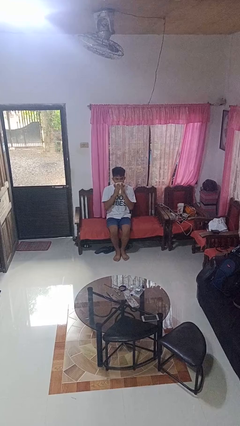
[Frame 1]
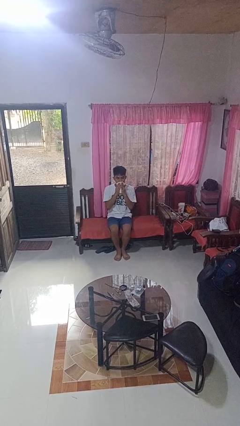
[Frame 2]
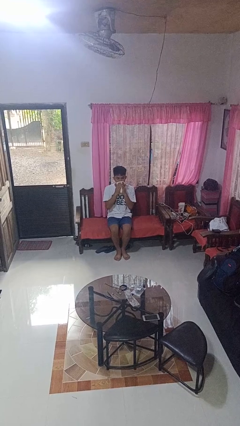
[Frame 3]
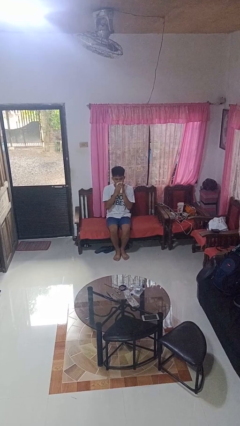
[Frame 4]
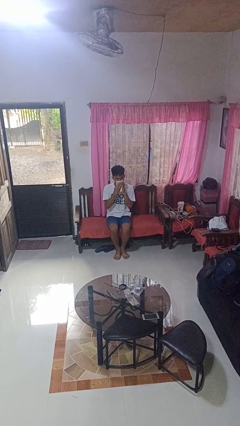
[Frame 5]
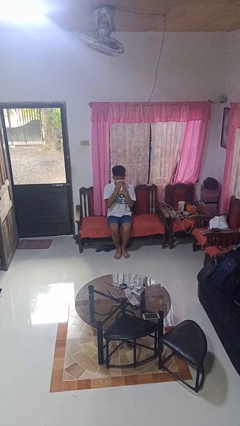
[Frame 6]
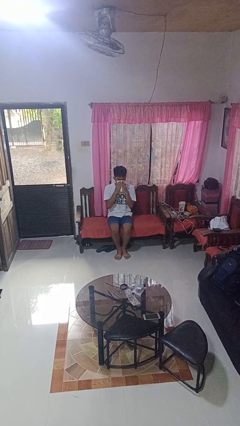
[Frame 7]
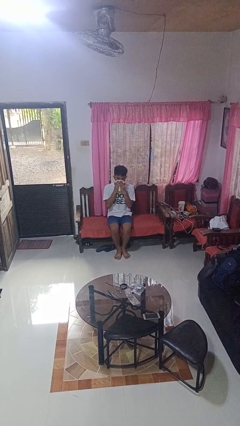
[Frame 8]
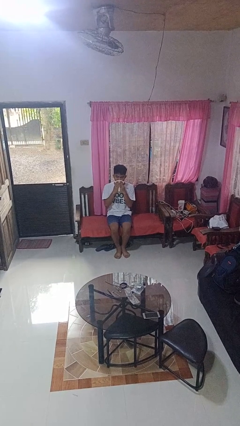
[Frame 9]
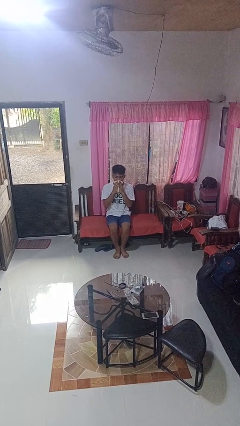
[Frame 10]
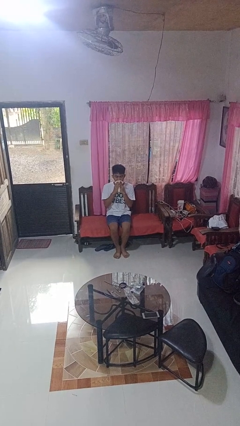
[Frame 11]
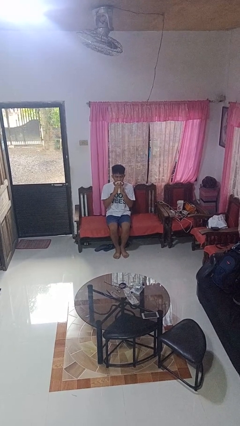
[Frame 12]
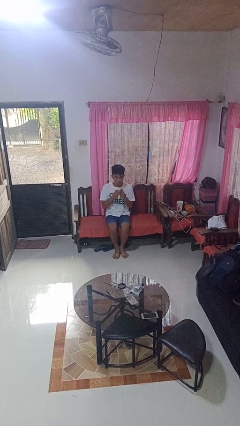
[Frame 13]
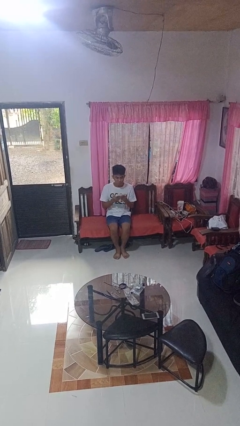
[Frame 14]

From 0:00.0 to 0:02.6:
person wipes mouth with napkin

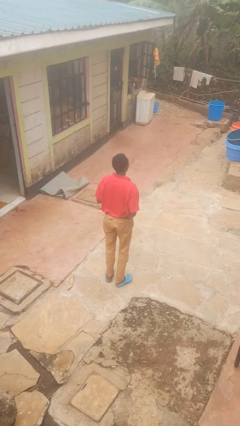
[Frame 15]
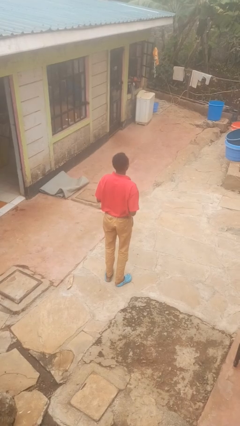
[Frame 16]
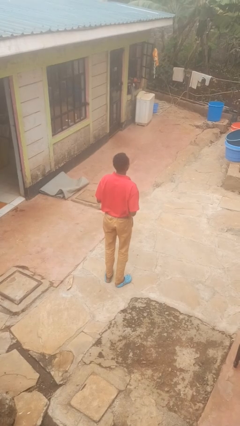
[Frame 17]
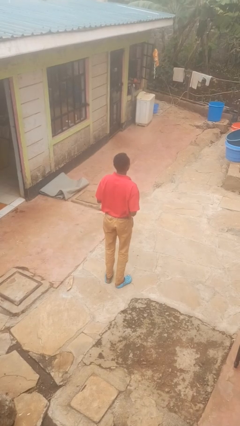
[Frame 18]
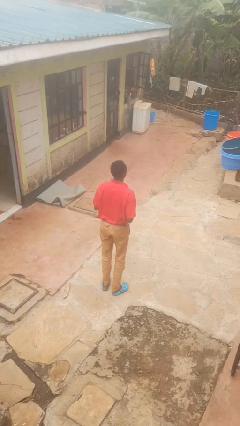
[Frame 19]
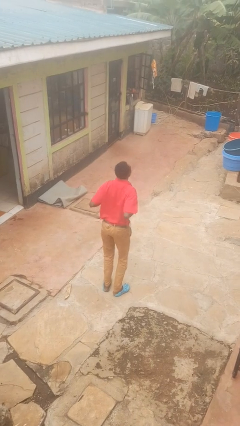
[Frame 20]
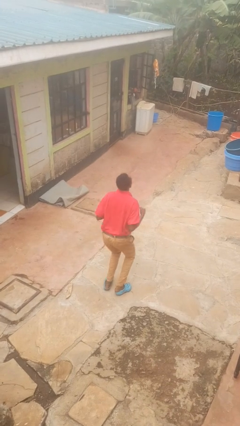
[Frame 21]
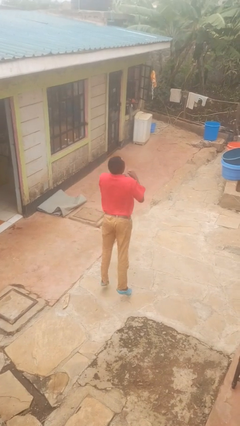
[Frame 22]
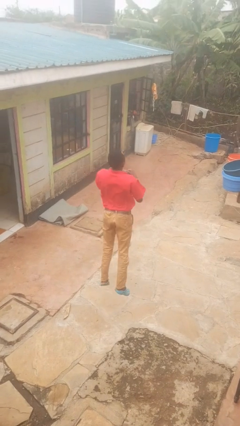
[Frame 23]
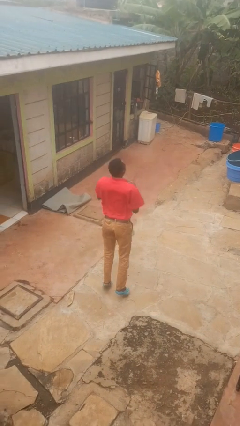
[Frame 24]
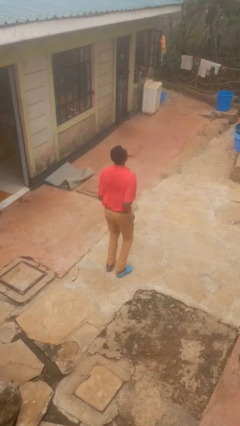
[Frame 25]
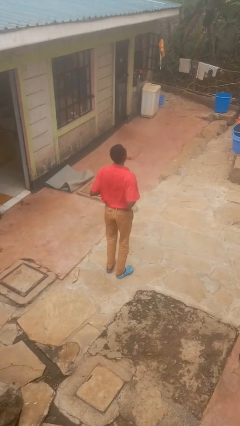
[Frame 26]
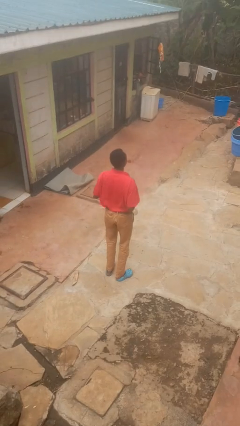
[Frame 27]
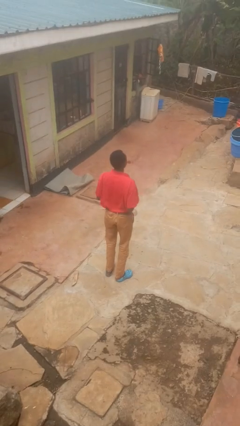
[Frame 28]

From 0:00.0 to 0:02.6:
person jumps

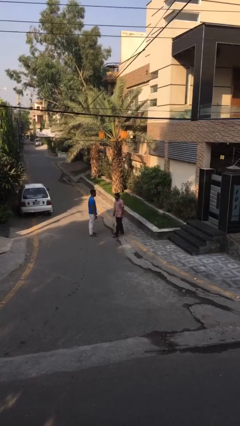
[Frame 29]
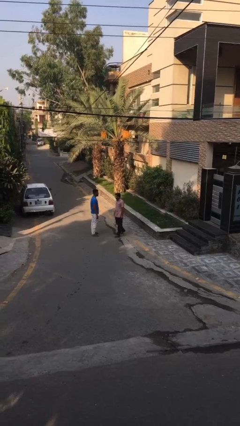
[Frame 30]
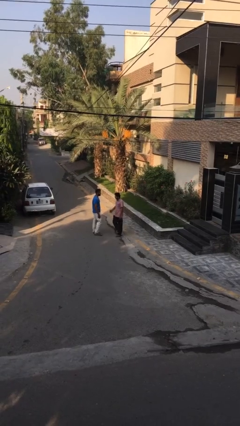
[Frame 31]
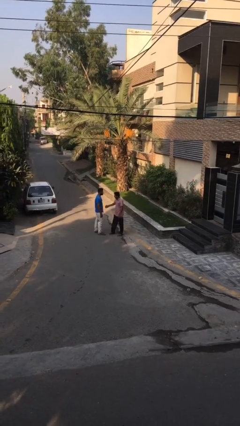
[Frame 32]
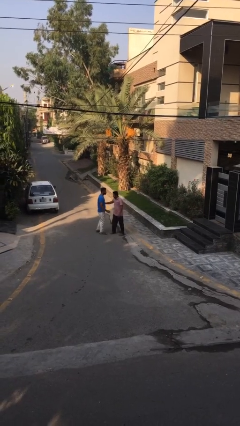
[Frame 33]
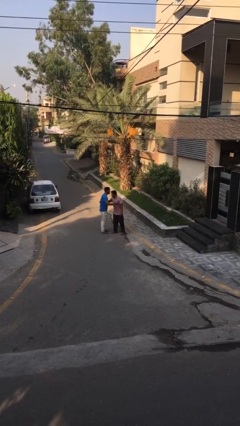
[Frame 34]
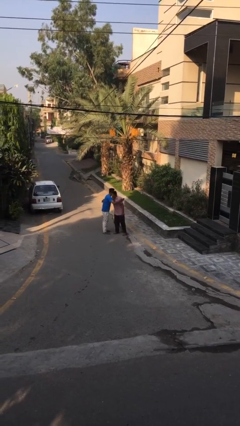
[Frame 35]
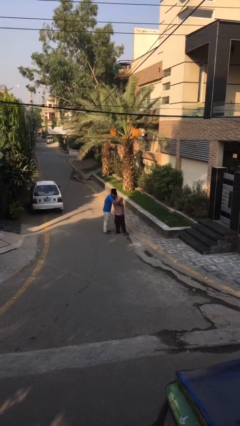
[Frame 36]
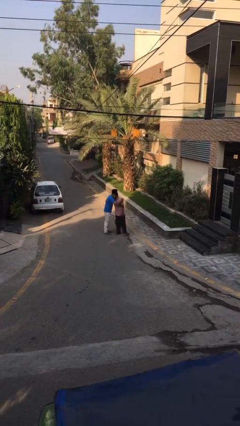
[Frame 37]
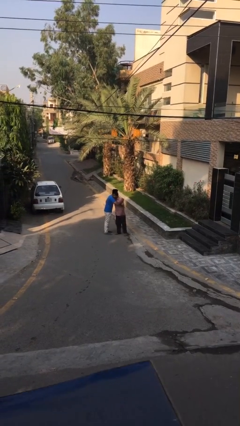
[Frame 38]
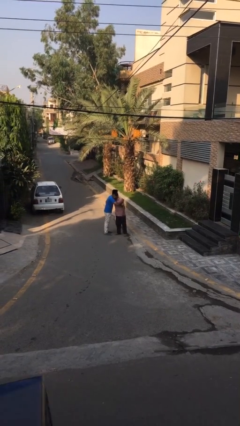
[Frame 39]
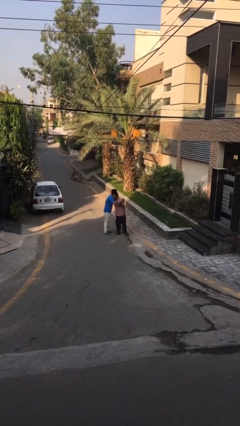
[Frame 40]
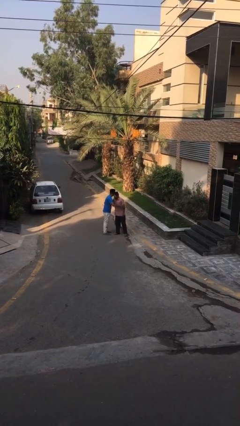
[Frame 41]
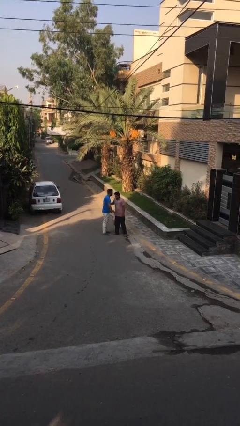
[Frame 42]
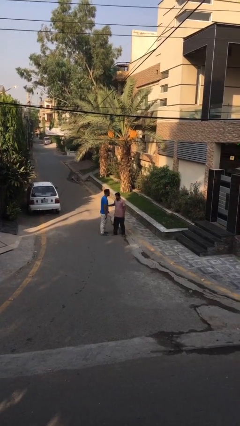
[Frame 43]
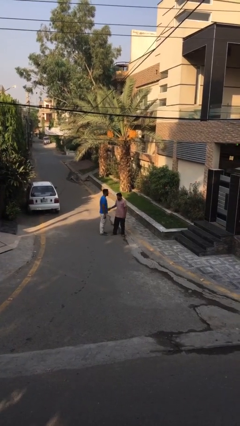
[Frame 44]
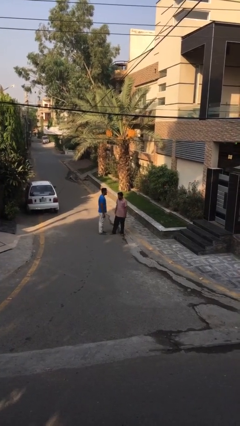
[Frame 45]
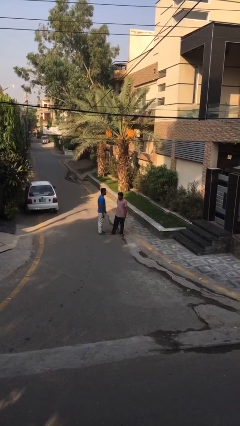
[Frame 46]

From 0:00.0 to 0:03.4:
person embraces person

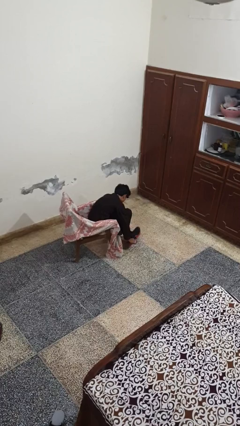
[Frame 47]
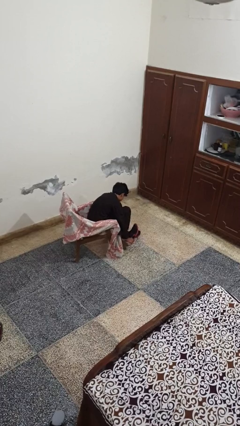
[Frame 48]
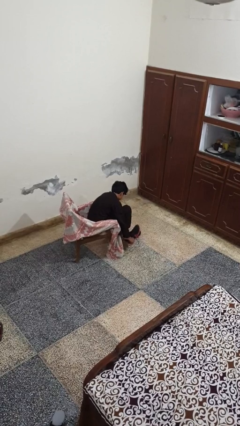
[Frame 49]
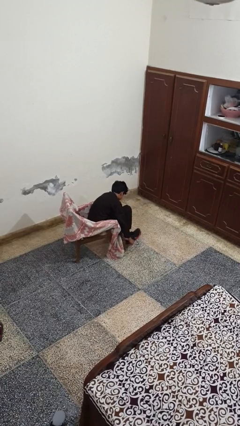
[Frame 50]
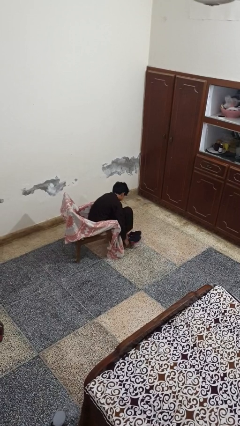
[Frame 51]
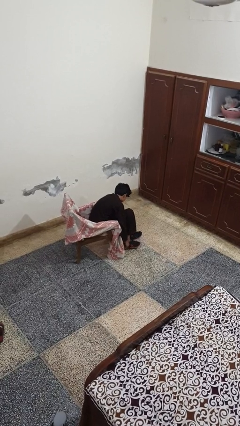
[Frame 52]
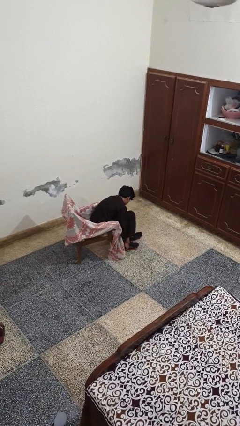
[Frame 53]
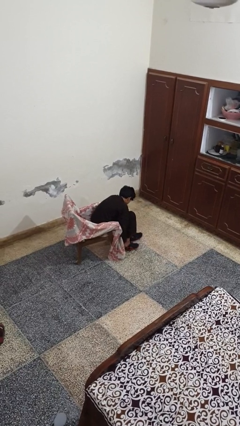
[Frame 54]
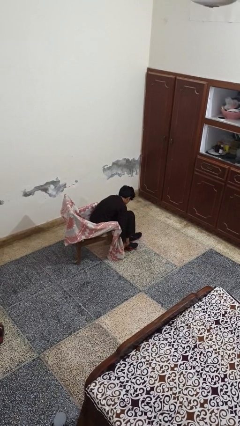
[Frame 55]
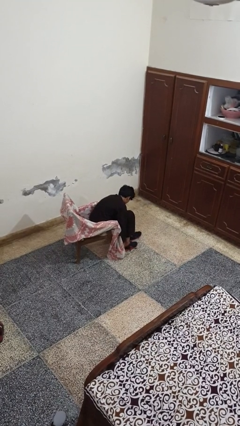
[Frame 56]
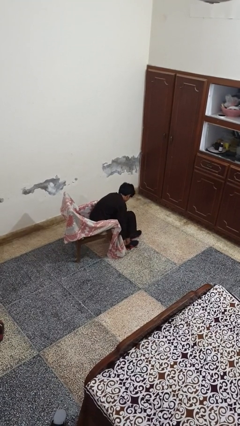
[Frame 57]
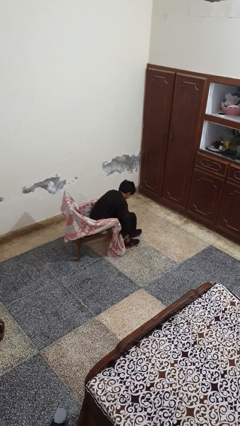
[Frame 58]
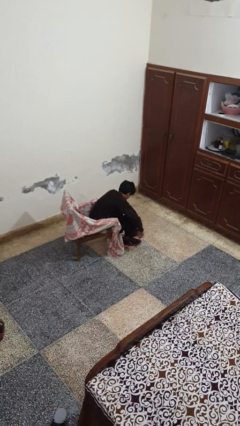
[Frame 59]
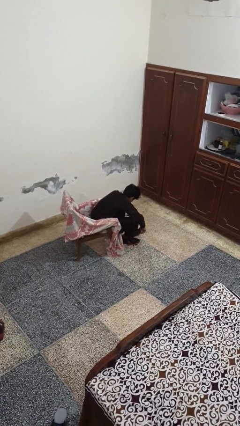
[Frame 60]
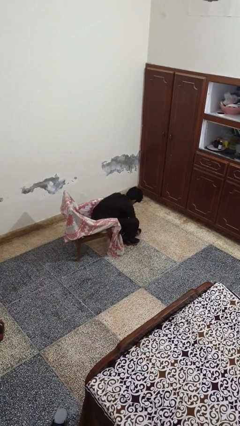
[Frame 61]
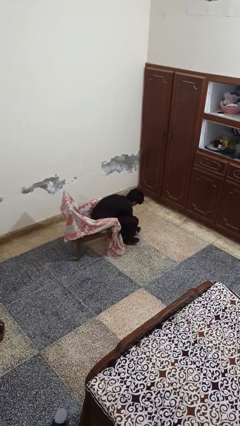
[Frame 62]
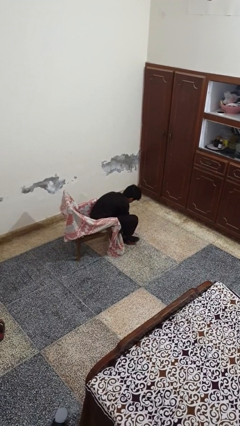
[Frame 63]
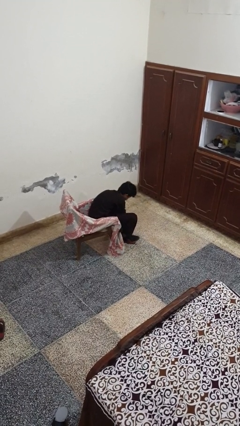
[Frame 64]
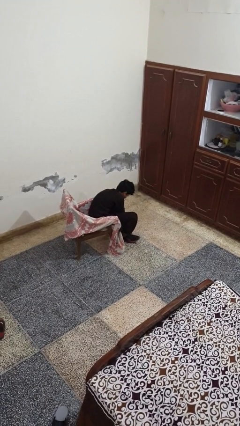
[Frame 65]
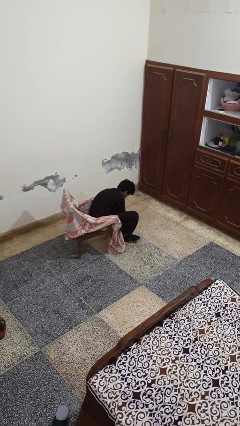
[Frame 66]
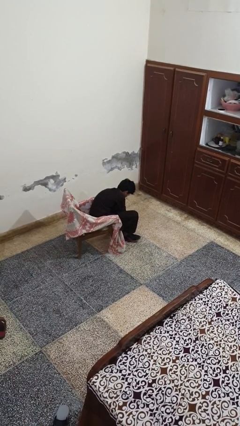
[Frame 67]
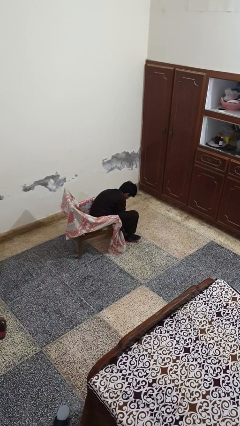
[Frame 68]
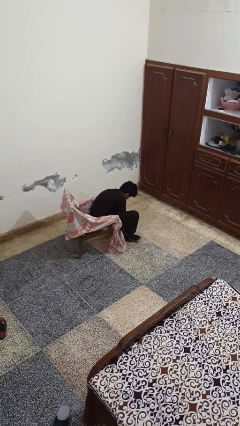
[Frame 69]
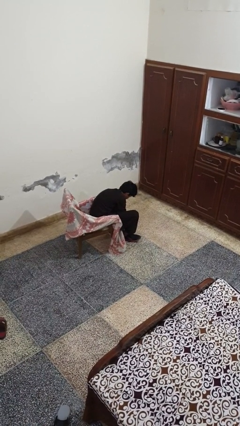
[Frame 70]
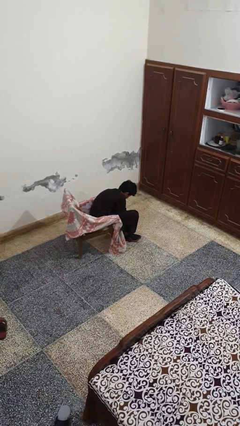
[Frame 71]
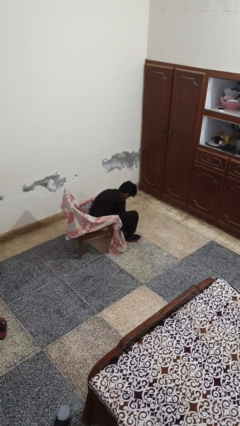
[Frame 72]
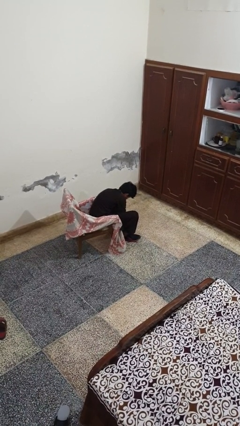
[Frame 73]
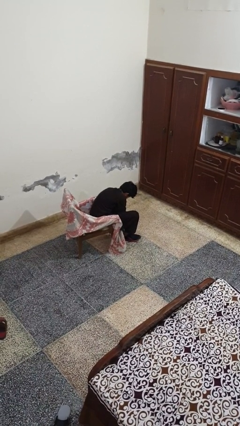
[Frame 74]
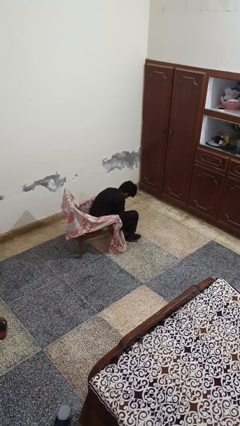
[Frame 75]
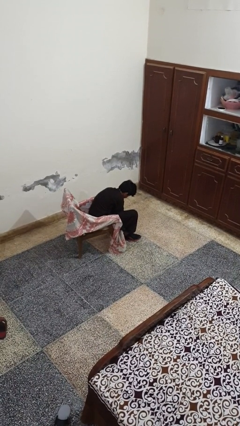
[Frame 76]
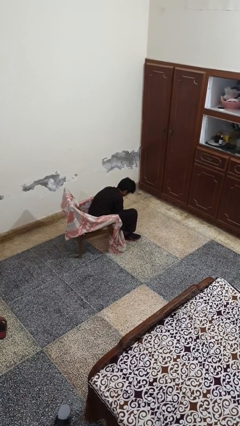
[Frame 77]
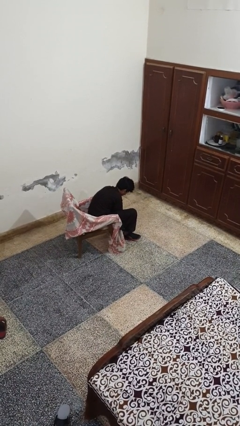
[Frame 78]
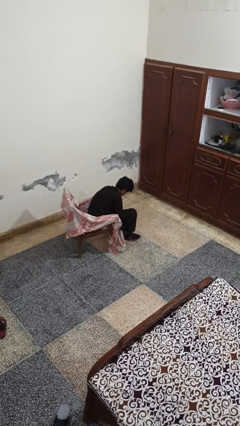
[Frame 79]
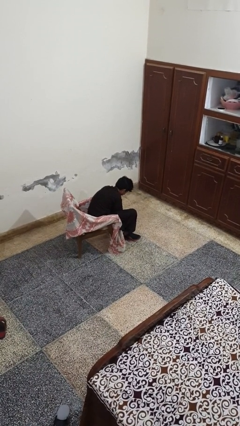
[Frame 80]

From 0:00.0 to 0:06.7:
person puts on shoes

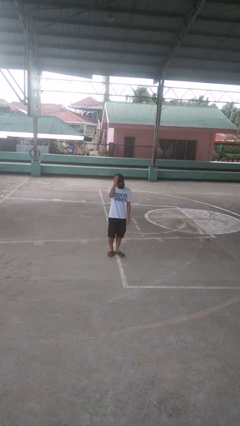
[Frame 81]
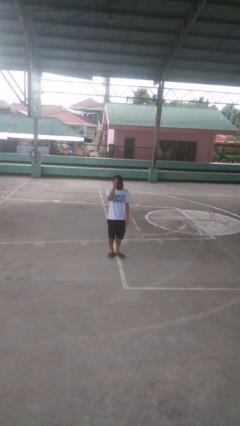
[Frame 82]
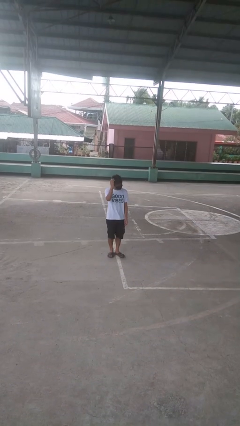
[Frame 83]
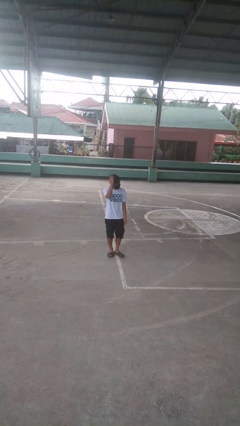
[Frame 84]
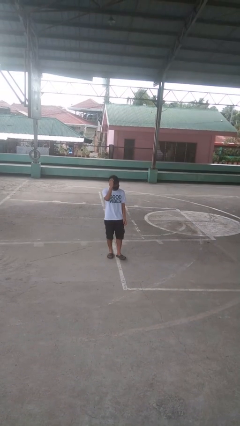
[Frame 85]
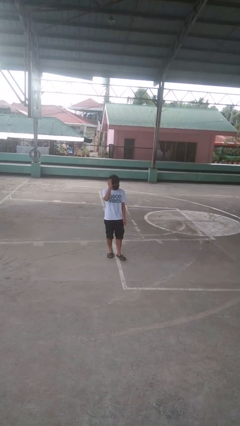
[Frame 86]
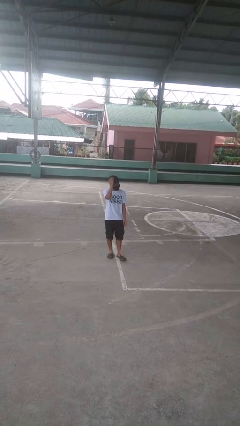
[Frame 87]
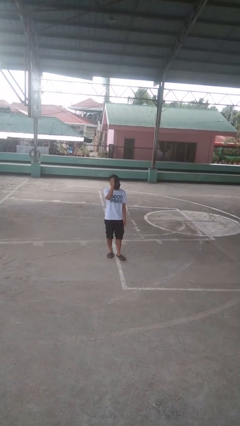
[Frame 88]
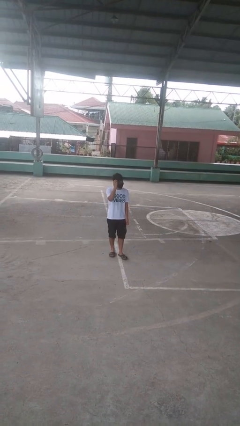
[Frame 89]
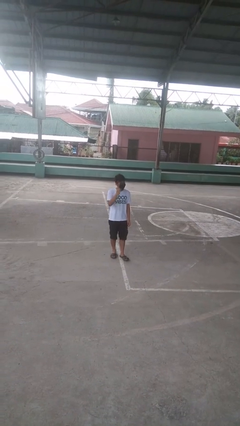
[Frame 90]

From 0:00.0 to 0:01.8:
person pats head

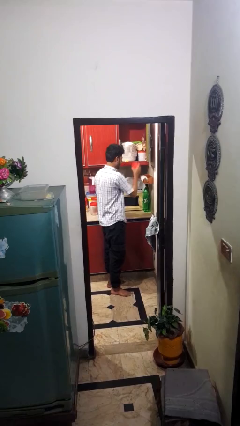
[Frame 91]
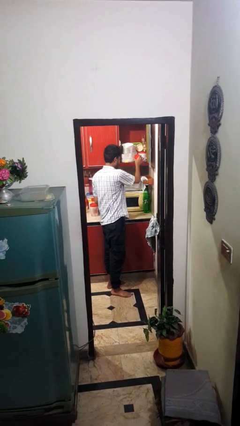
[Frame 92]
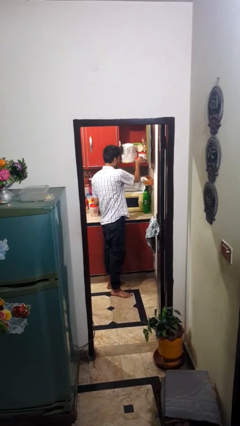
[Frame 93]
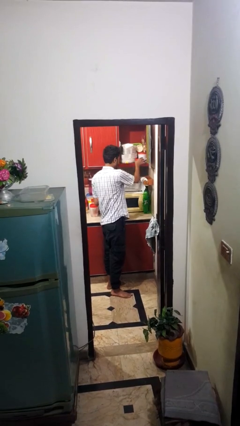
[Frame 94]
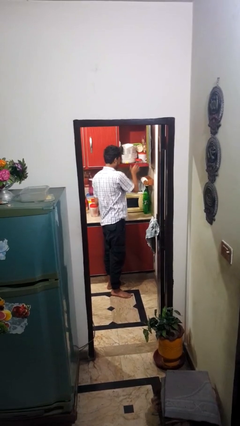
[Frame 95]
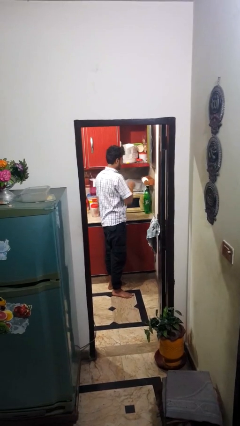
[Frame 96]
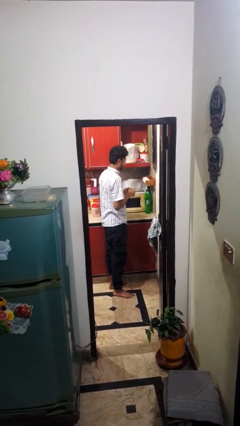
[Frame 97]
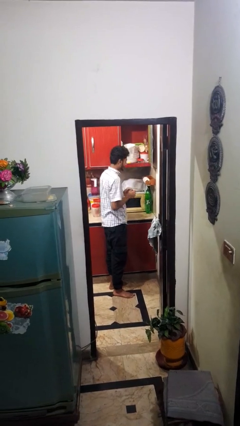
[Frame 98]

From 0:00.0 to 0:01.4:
person puts down object into cabinet
